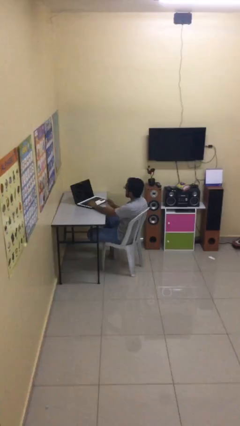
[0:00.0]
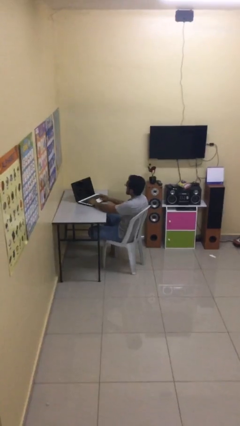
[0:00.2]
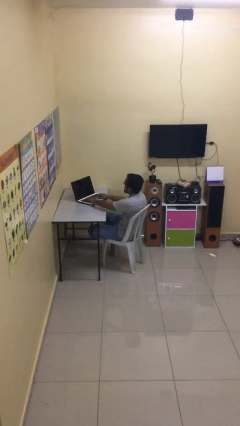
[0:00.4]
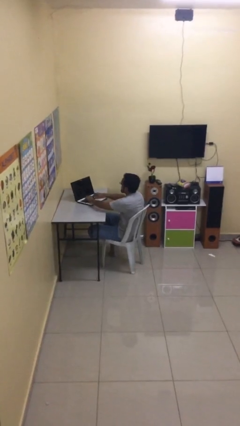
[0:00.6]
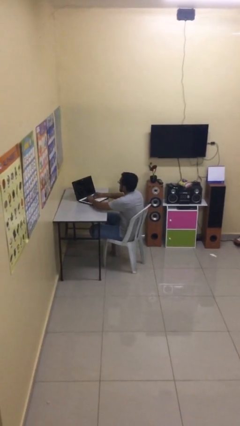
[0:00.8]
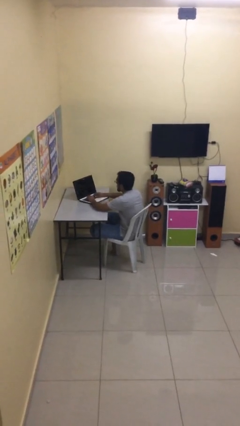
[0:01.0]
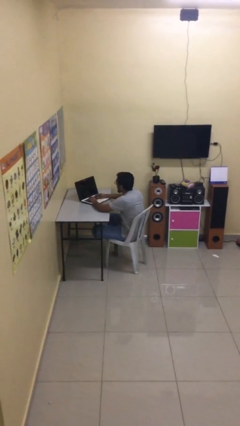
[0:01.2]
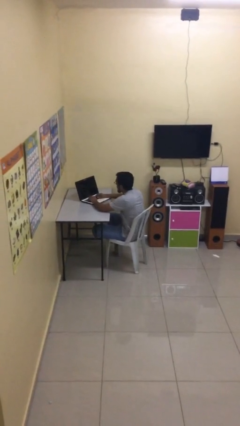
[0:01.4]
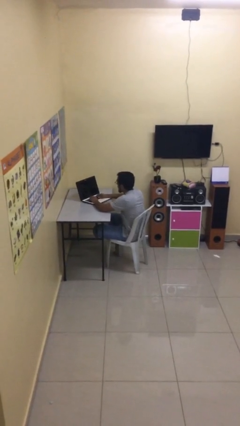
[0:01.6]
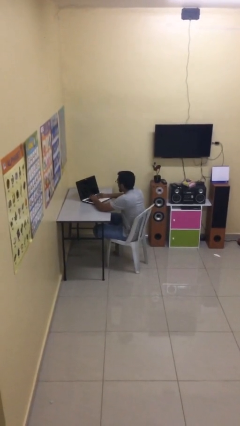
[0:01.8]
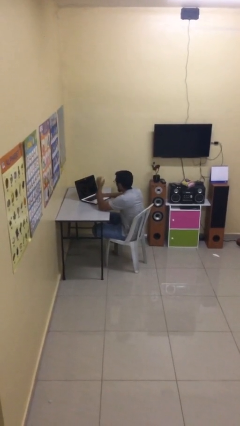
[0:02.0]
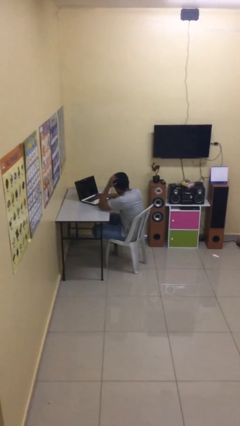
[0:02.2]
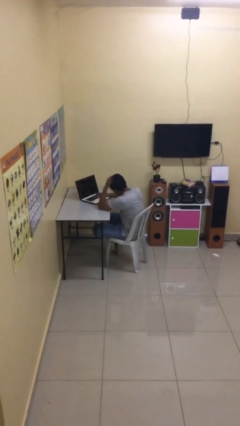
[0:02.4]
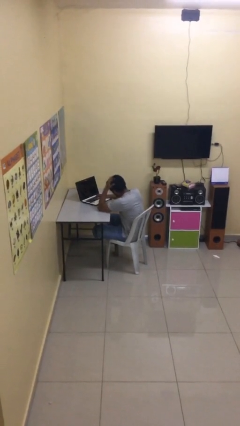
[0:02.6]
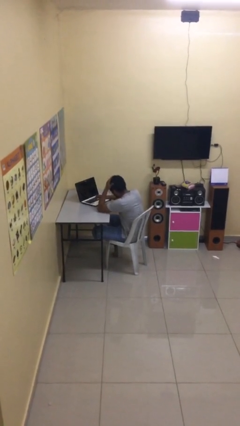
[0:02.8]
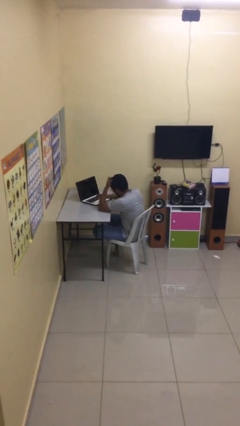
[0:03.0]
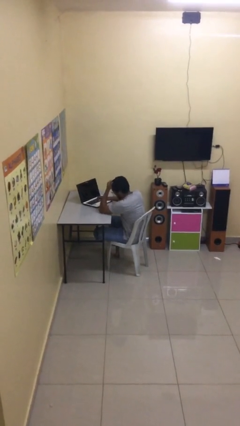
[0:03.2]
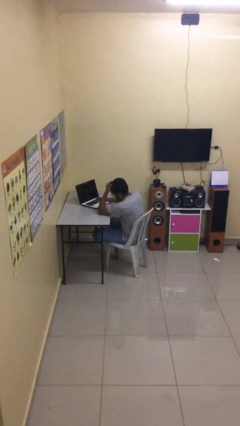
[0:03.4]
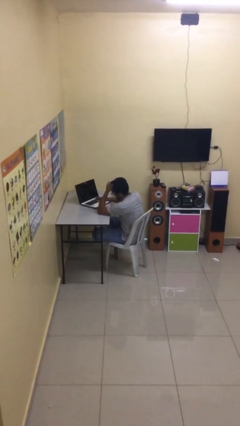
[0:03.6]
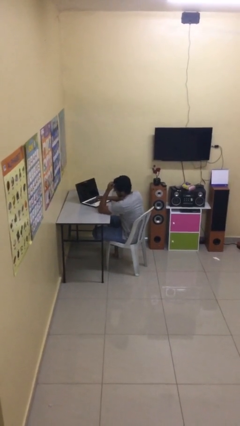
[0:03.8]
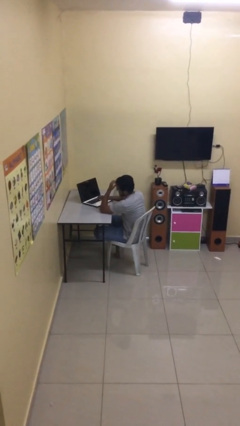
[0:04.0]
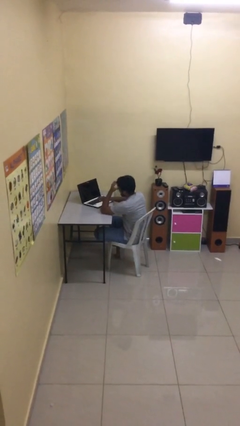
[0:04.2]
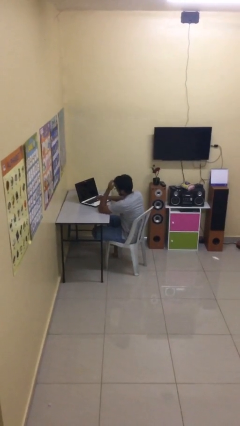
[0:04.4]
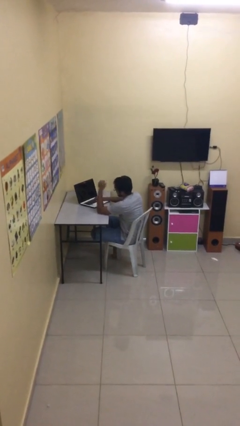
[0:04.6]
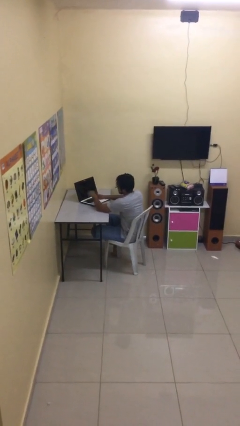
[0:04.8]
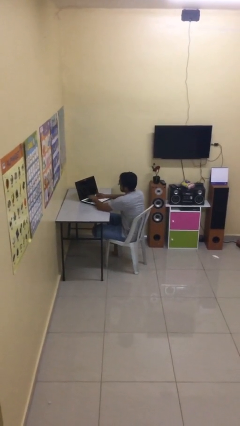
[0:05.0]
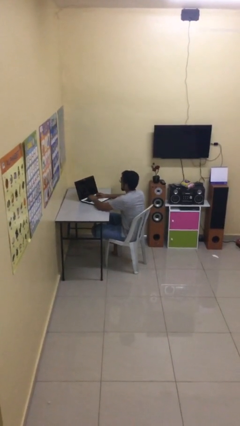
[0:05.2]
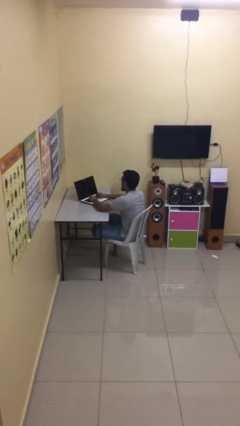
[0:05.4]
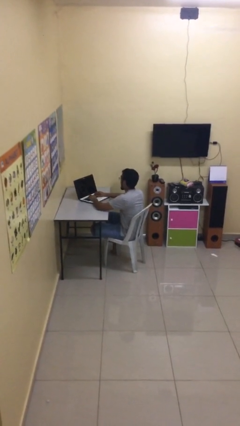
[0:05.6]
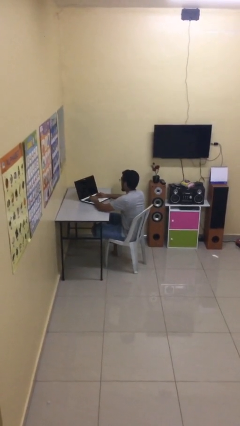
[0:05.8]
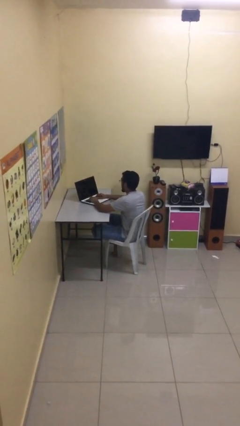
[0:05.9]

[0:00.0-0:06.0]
person interacts with laptop

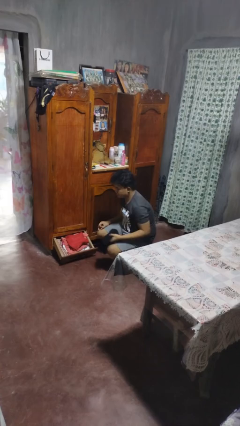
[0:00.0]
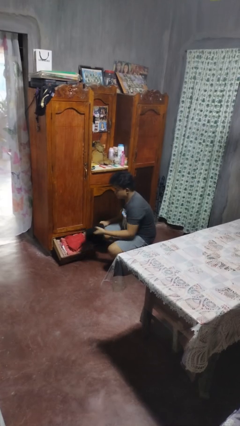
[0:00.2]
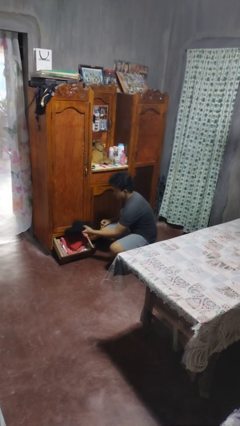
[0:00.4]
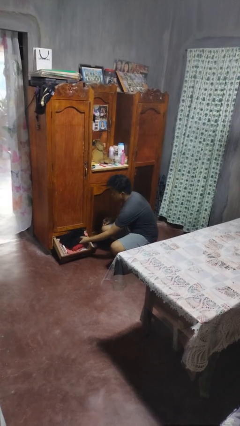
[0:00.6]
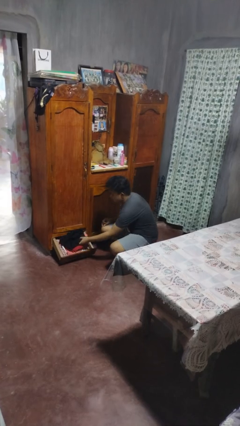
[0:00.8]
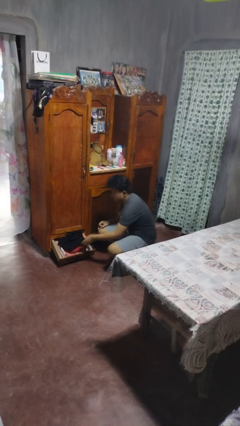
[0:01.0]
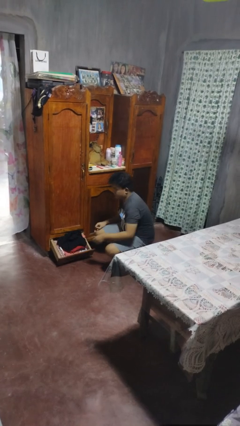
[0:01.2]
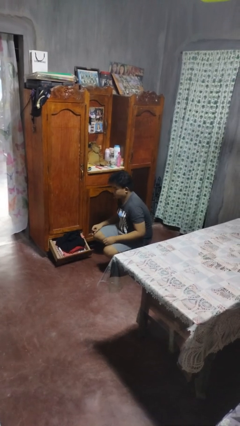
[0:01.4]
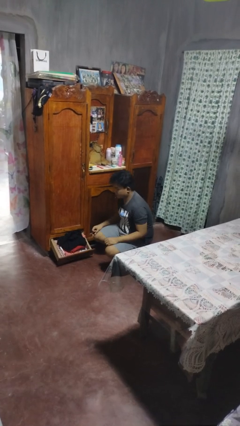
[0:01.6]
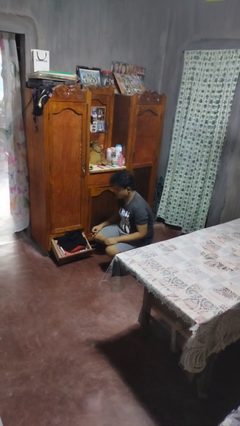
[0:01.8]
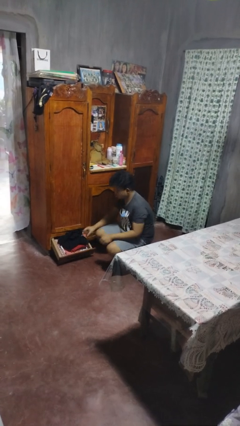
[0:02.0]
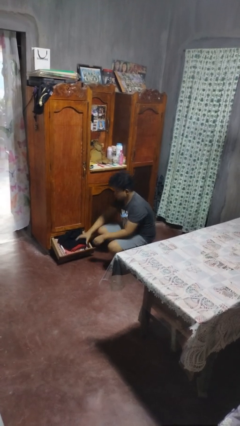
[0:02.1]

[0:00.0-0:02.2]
person puts clothes into dresser

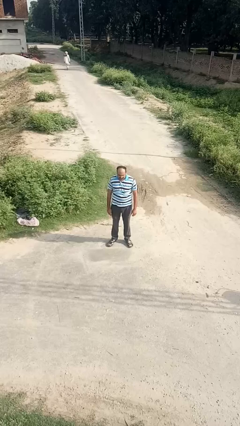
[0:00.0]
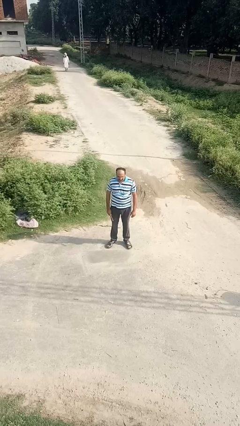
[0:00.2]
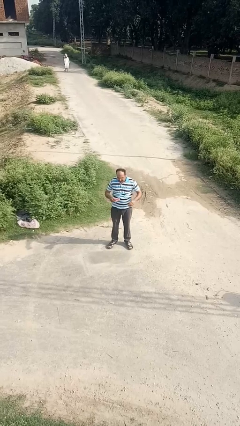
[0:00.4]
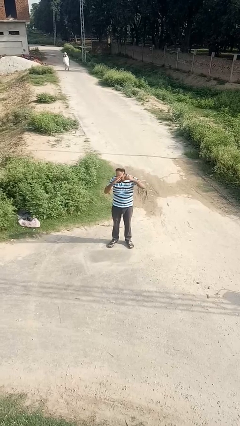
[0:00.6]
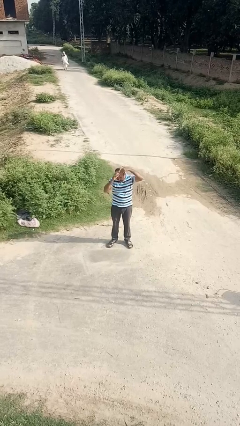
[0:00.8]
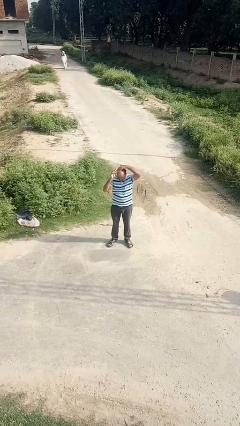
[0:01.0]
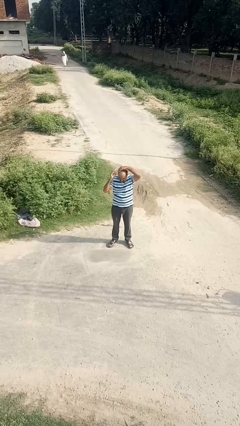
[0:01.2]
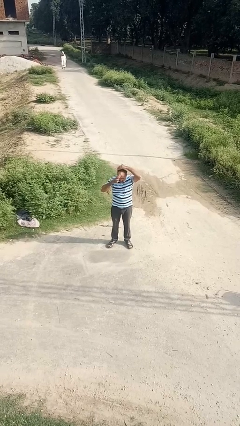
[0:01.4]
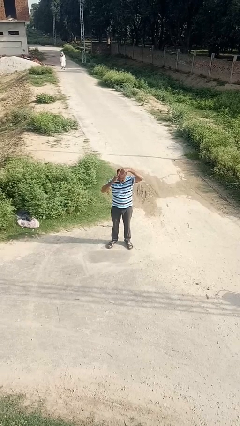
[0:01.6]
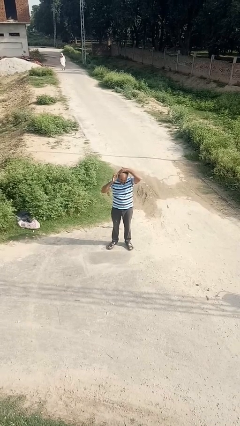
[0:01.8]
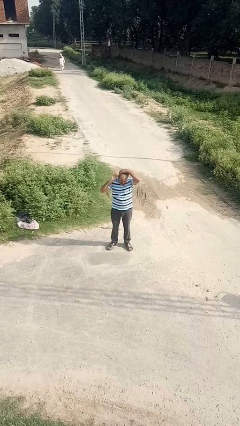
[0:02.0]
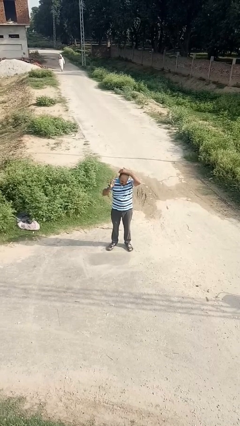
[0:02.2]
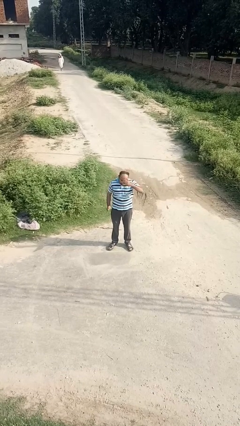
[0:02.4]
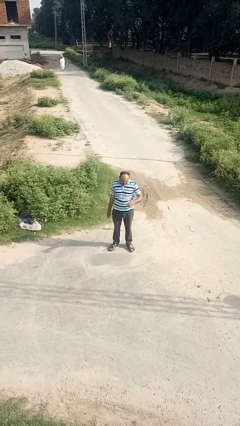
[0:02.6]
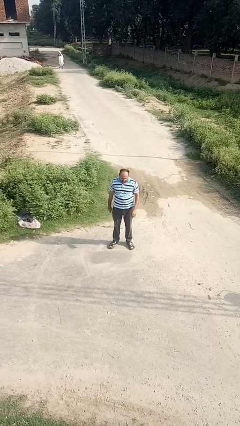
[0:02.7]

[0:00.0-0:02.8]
person brushes hair

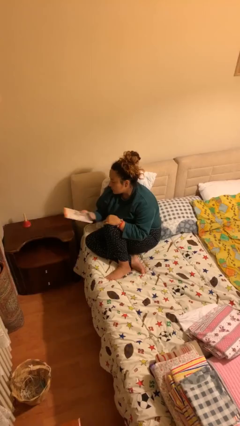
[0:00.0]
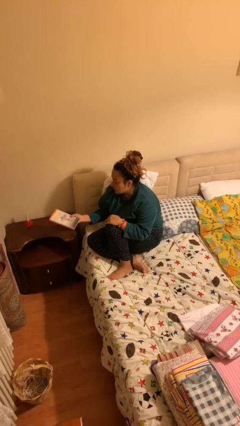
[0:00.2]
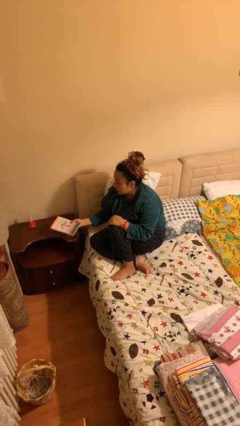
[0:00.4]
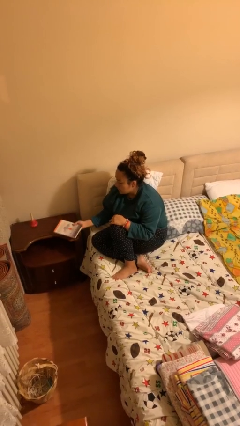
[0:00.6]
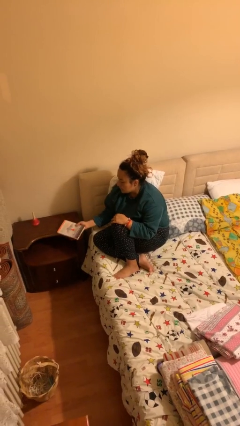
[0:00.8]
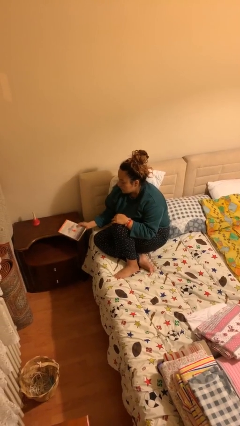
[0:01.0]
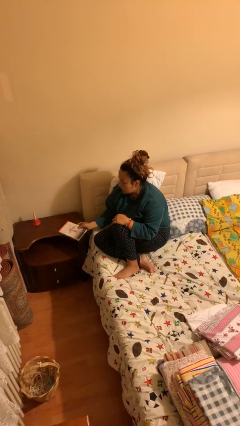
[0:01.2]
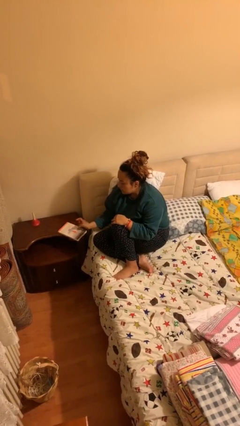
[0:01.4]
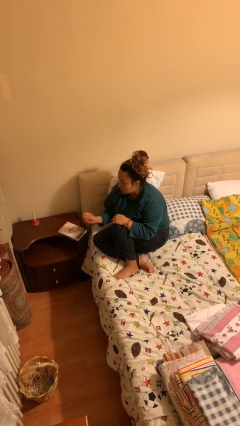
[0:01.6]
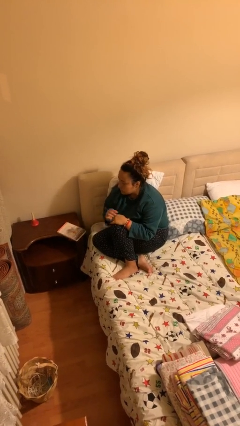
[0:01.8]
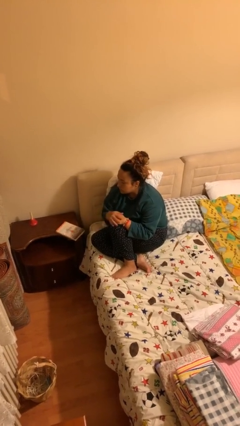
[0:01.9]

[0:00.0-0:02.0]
person puts down object on table

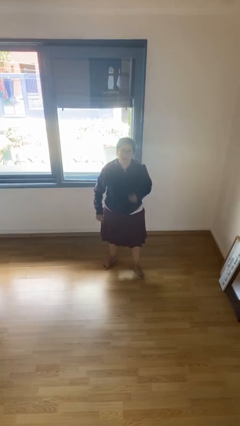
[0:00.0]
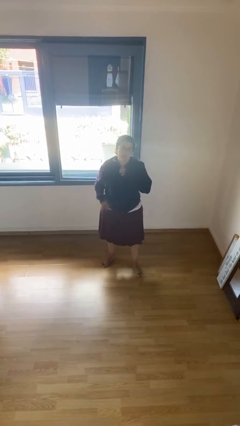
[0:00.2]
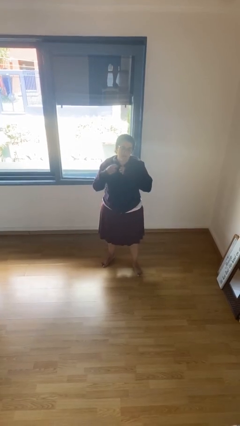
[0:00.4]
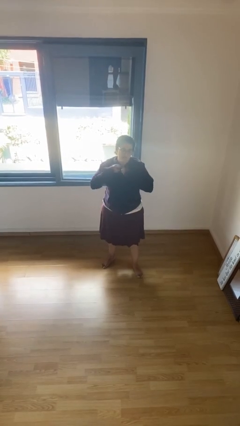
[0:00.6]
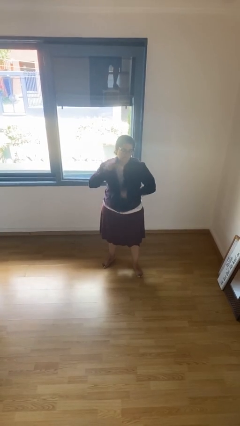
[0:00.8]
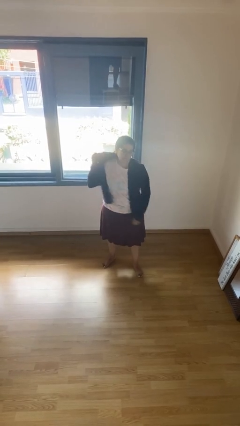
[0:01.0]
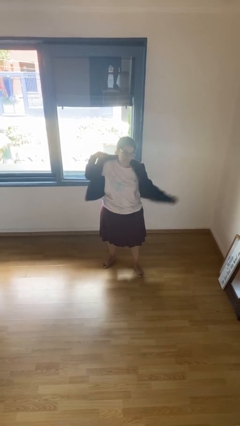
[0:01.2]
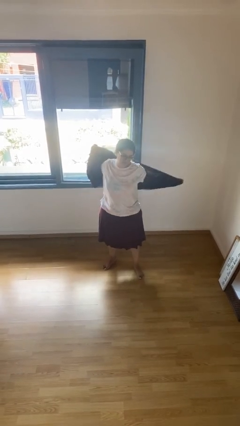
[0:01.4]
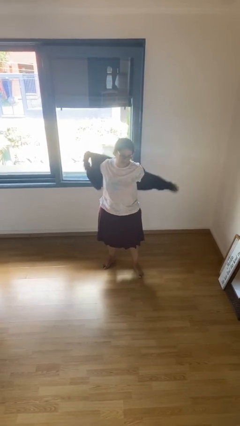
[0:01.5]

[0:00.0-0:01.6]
person unzips jacket

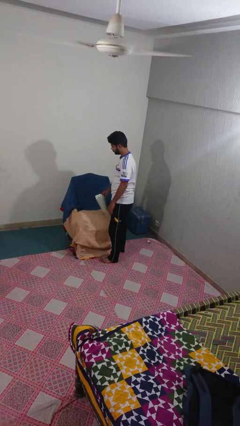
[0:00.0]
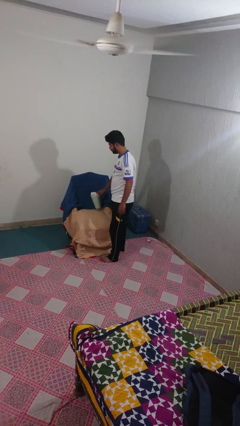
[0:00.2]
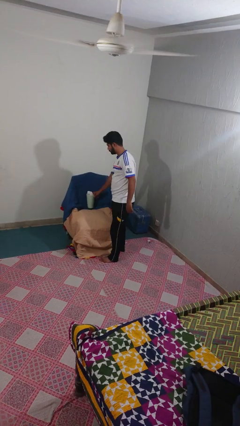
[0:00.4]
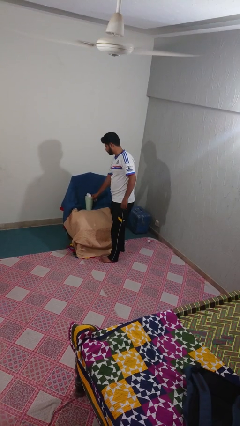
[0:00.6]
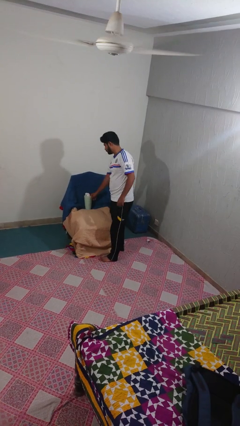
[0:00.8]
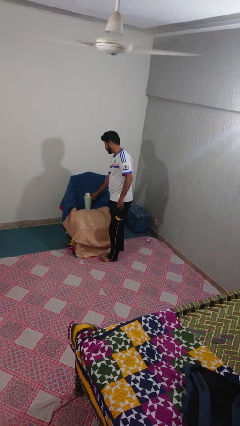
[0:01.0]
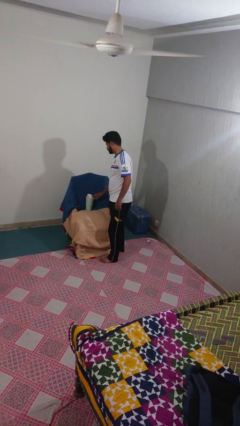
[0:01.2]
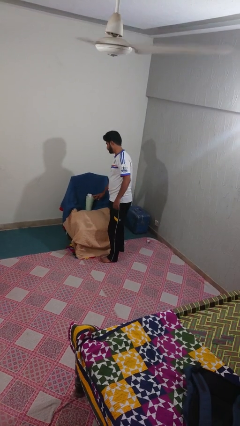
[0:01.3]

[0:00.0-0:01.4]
person puts down object on couch

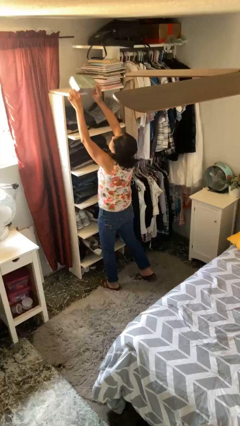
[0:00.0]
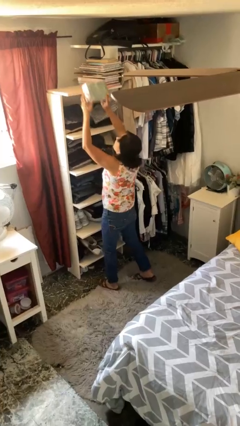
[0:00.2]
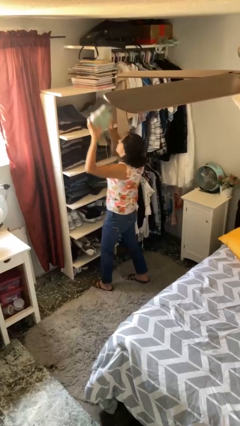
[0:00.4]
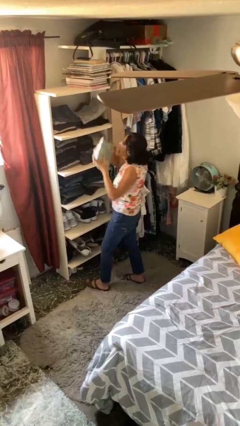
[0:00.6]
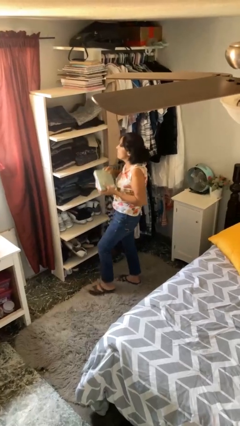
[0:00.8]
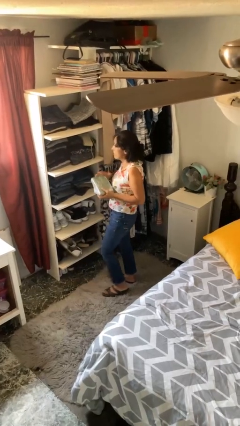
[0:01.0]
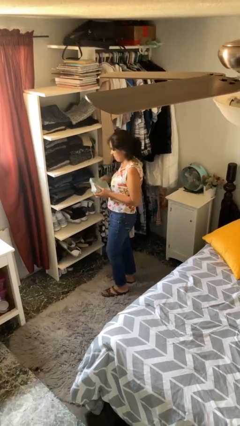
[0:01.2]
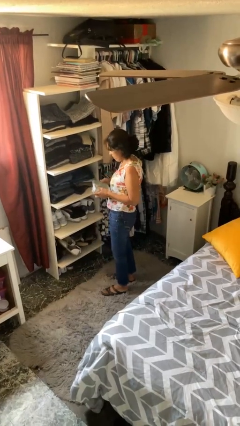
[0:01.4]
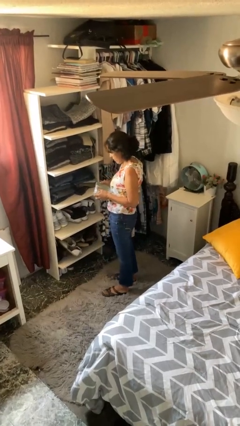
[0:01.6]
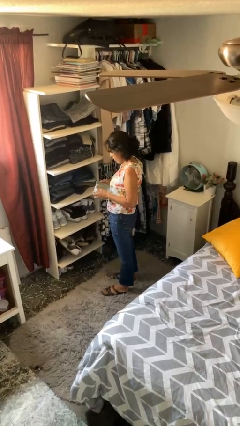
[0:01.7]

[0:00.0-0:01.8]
person picks up object from shelf
